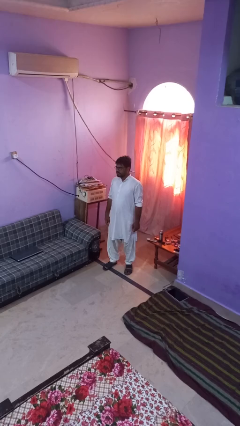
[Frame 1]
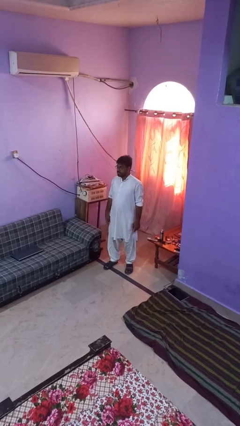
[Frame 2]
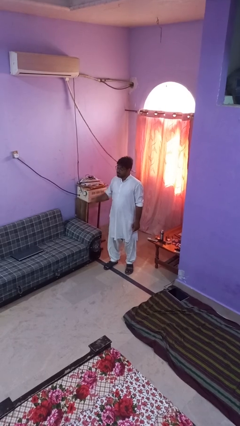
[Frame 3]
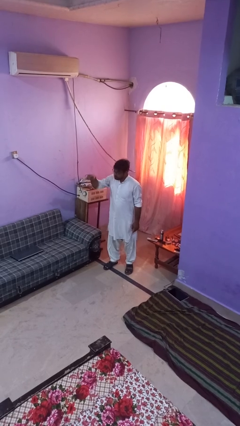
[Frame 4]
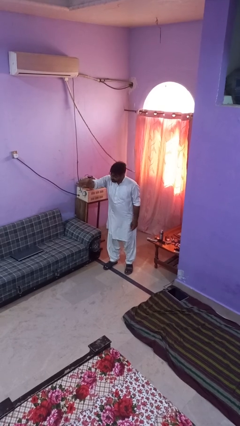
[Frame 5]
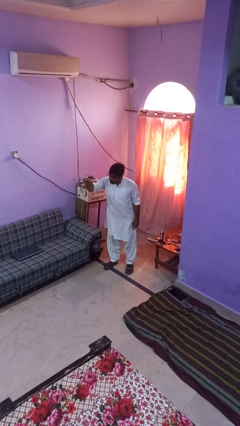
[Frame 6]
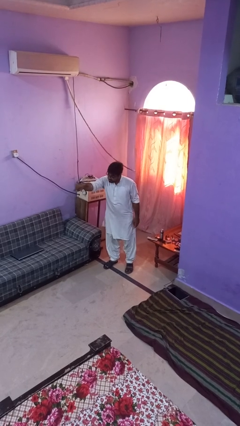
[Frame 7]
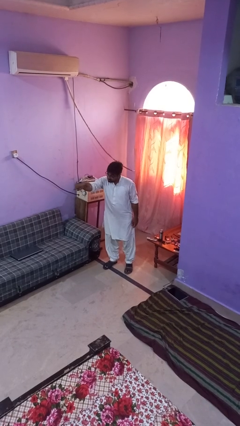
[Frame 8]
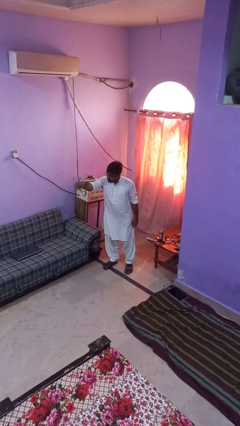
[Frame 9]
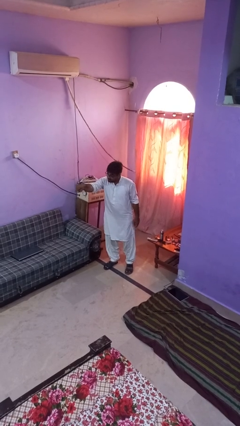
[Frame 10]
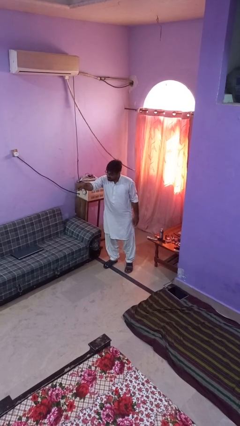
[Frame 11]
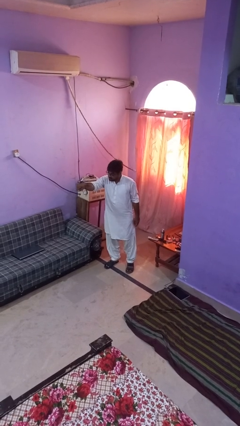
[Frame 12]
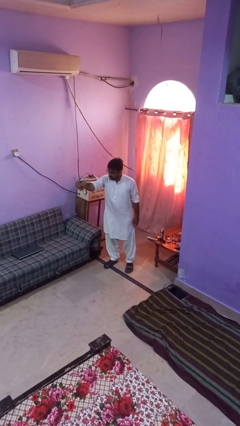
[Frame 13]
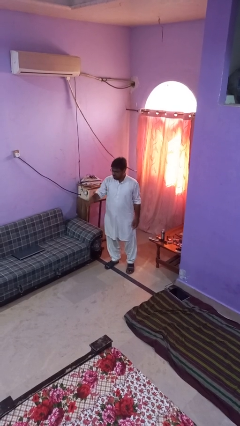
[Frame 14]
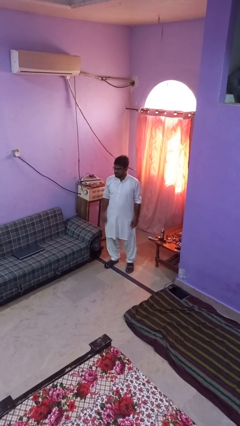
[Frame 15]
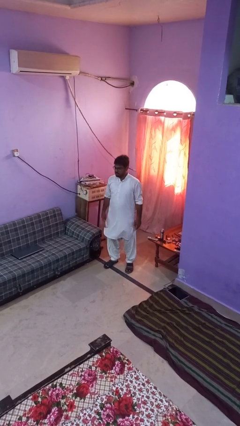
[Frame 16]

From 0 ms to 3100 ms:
person points at person

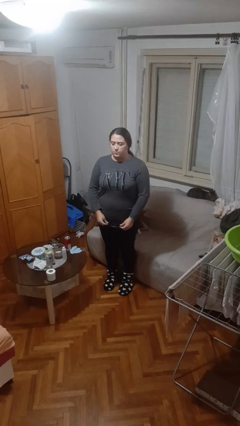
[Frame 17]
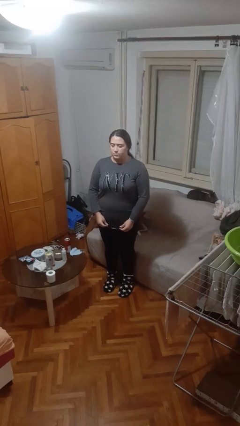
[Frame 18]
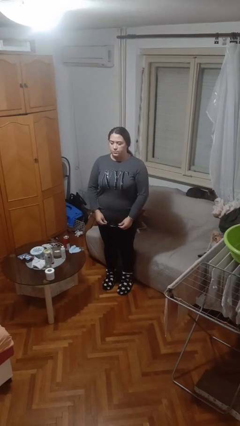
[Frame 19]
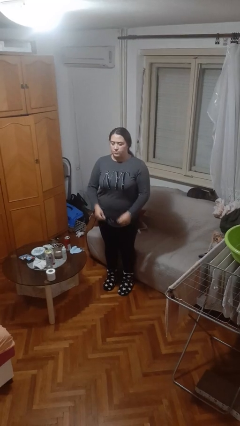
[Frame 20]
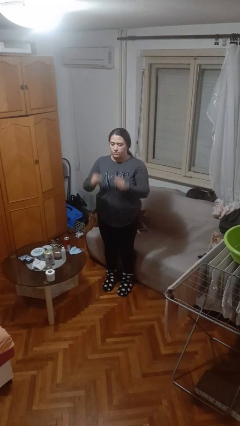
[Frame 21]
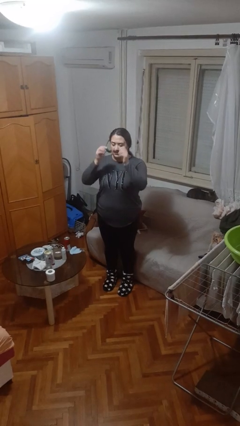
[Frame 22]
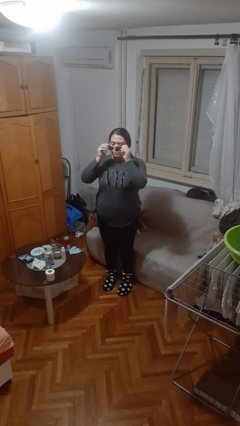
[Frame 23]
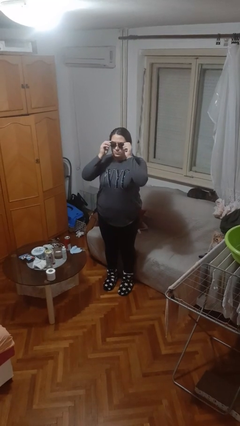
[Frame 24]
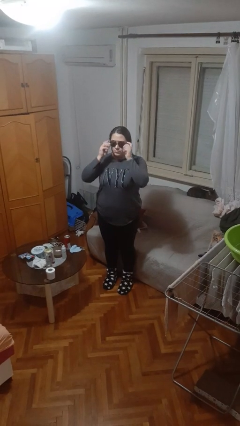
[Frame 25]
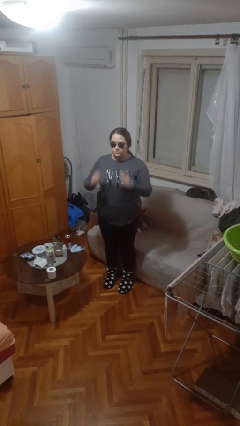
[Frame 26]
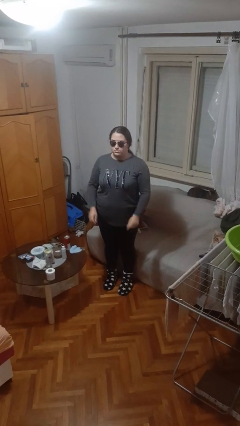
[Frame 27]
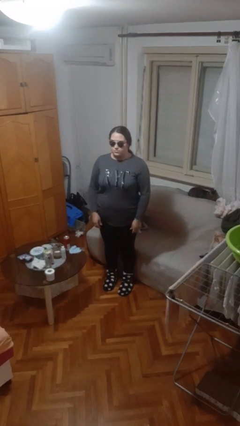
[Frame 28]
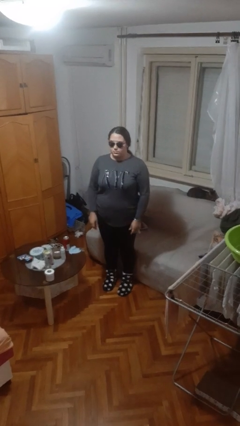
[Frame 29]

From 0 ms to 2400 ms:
person puts on sunglasses

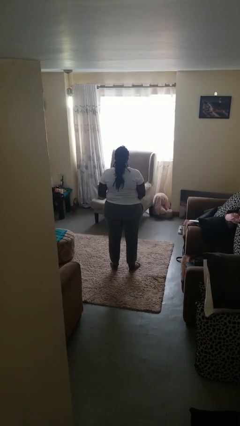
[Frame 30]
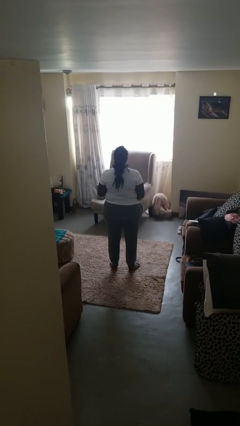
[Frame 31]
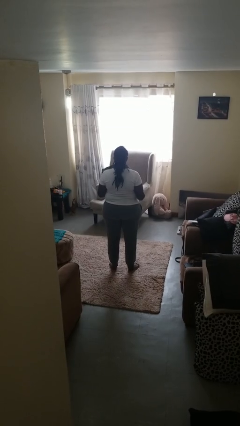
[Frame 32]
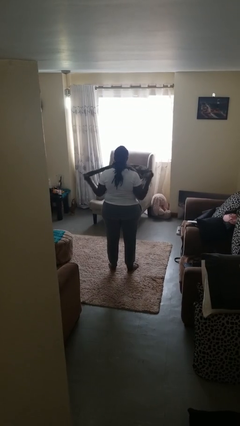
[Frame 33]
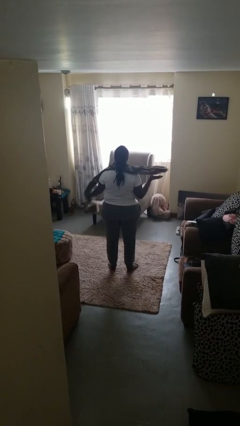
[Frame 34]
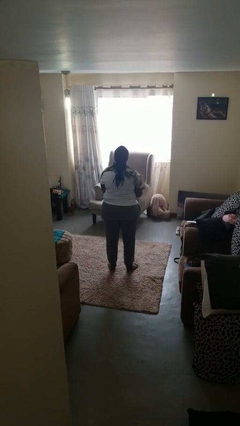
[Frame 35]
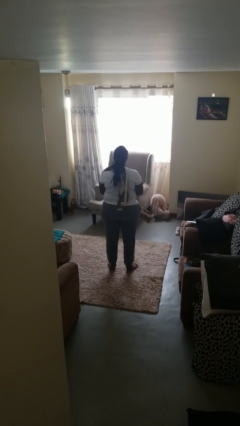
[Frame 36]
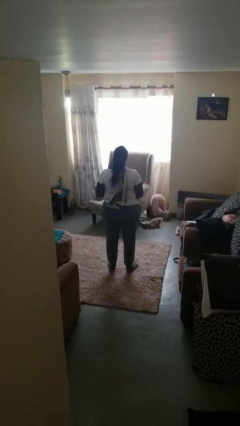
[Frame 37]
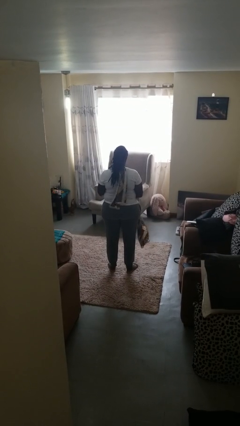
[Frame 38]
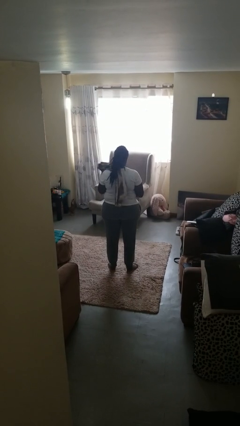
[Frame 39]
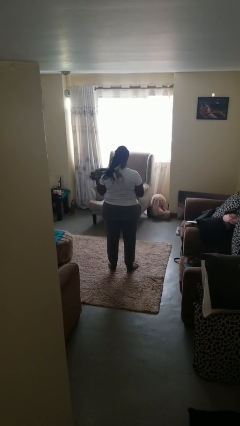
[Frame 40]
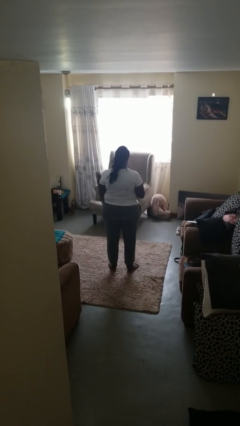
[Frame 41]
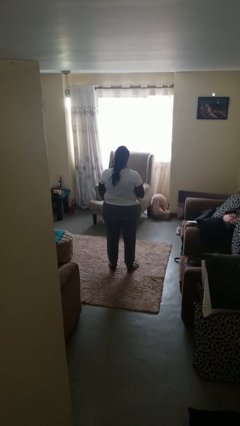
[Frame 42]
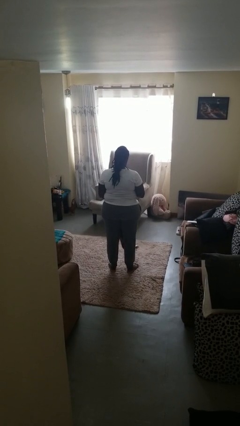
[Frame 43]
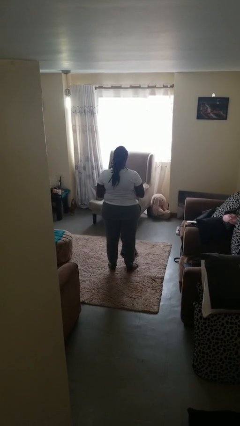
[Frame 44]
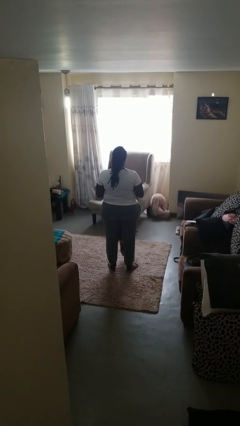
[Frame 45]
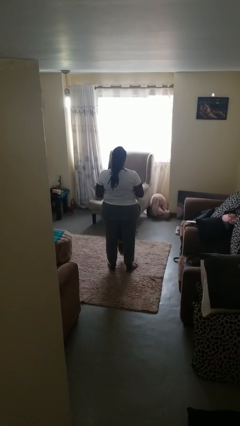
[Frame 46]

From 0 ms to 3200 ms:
person takes off scarf

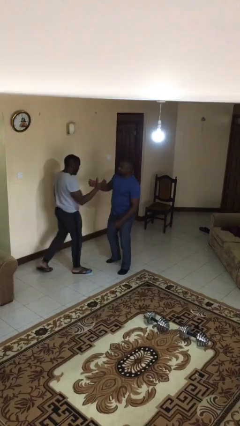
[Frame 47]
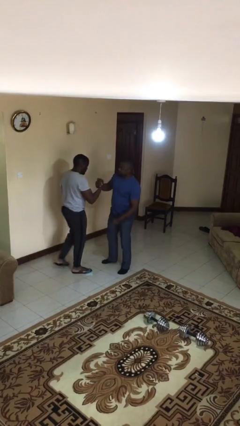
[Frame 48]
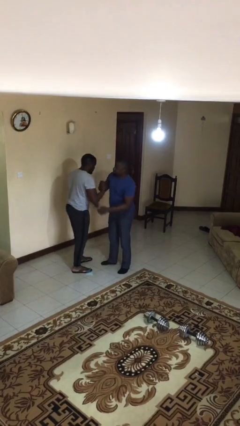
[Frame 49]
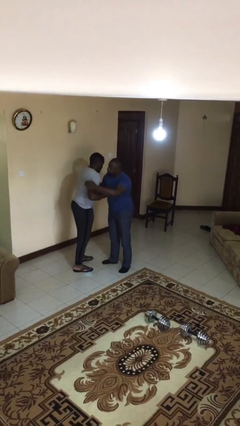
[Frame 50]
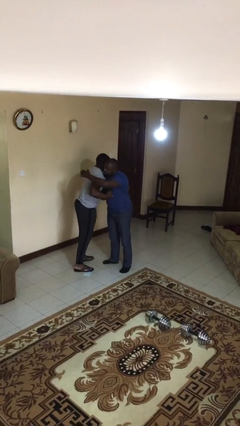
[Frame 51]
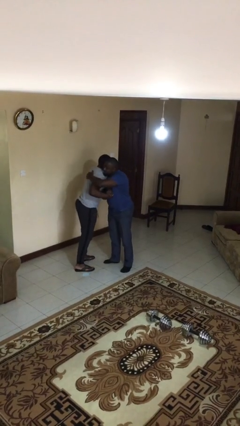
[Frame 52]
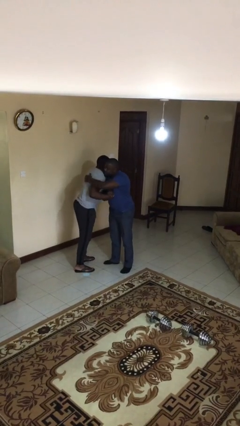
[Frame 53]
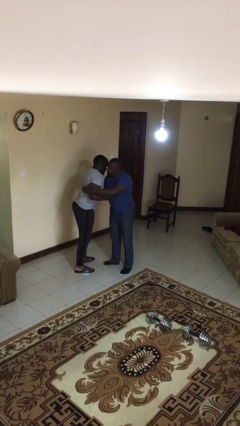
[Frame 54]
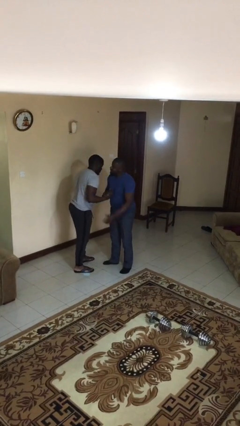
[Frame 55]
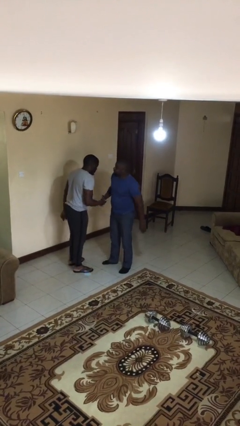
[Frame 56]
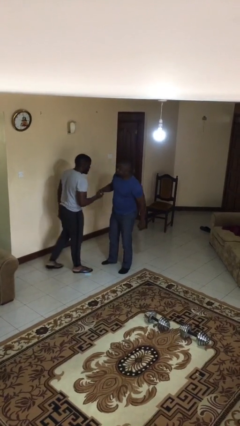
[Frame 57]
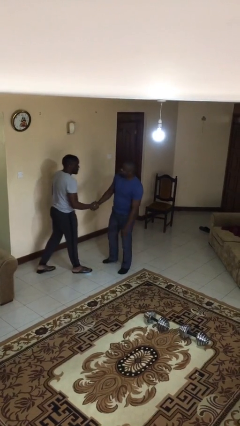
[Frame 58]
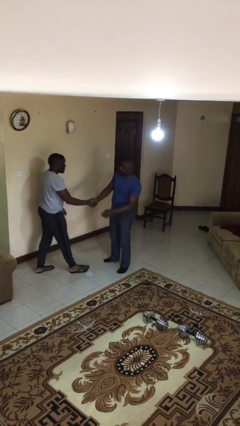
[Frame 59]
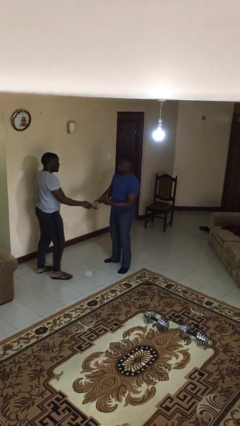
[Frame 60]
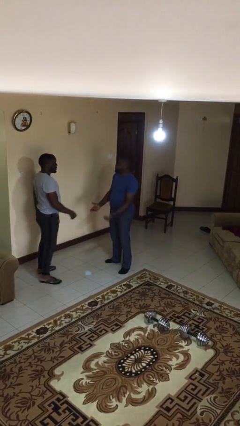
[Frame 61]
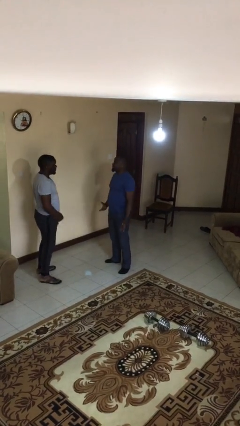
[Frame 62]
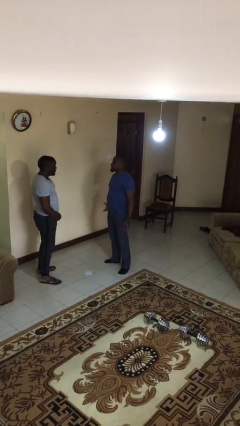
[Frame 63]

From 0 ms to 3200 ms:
person embraces person

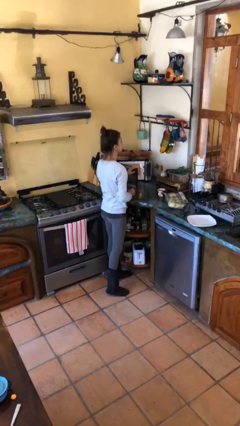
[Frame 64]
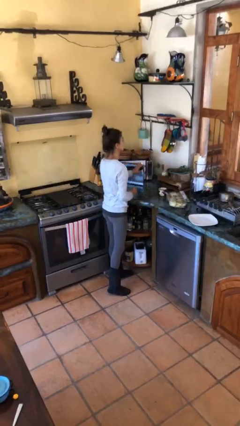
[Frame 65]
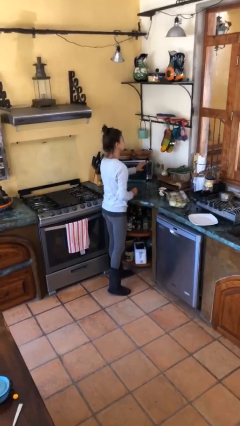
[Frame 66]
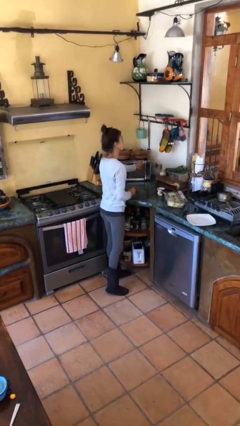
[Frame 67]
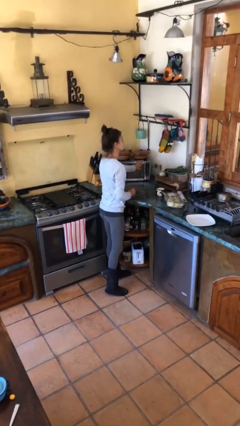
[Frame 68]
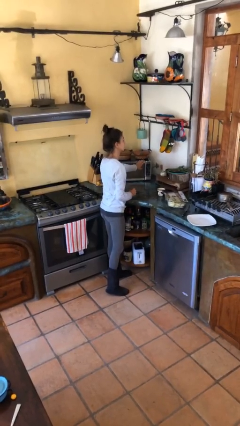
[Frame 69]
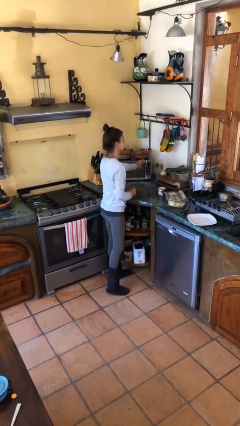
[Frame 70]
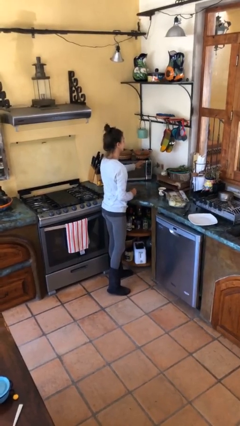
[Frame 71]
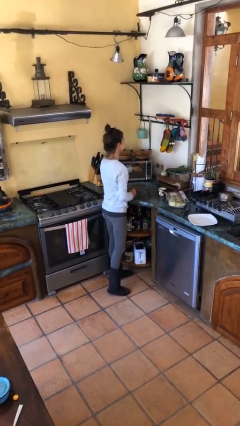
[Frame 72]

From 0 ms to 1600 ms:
person closes microwave

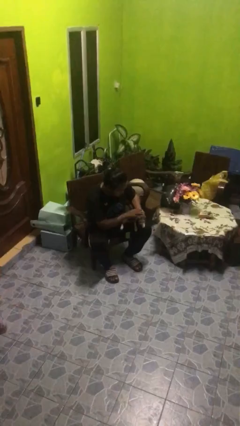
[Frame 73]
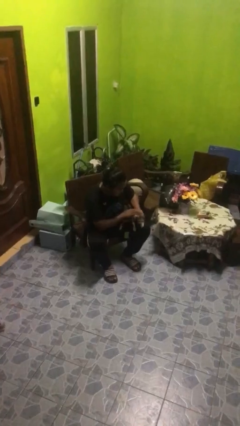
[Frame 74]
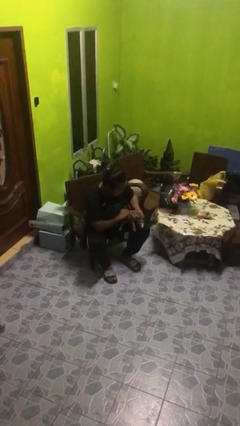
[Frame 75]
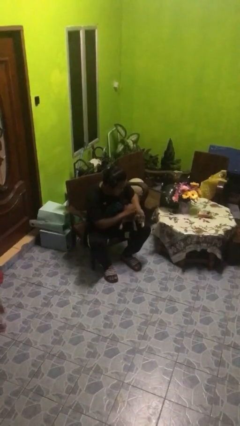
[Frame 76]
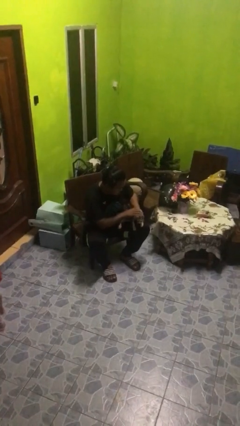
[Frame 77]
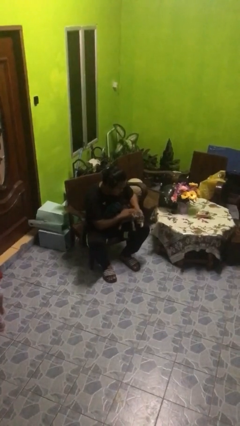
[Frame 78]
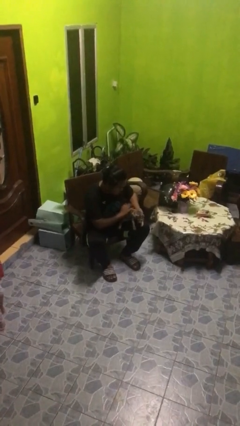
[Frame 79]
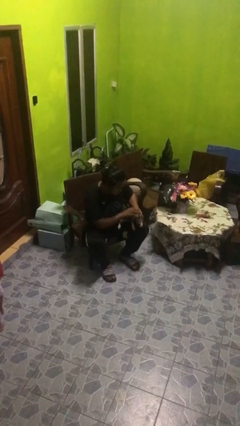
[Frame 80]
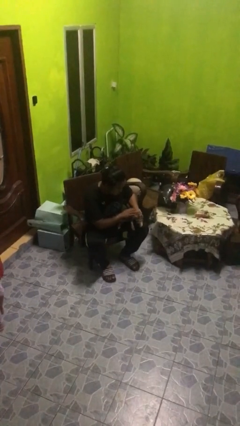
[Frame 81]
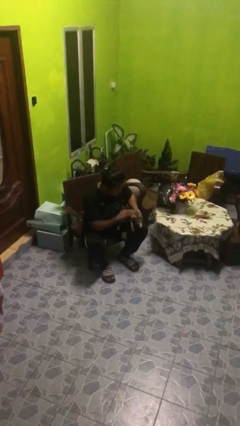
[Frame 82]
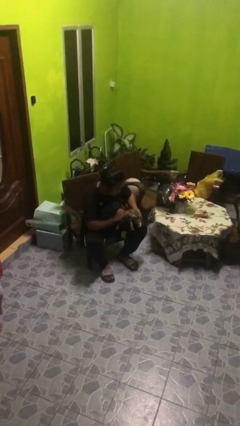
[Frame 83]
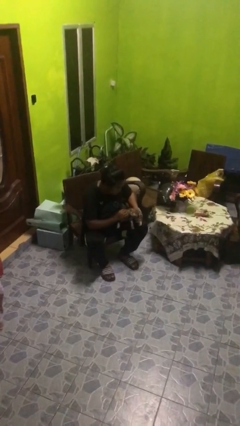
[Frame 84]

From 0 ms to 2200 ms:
person pets cat

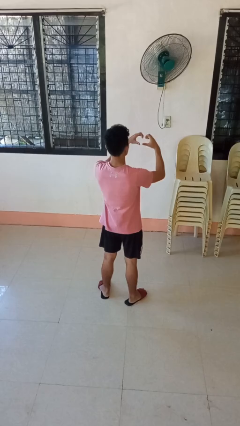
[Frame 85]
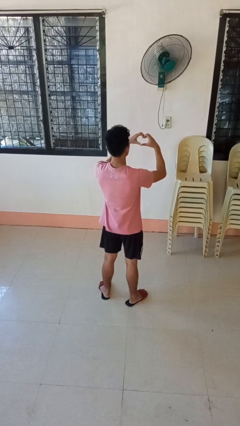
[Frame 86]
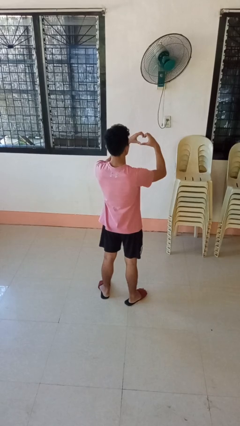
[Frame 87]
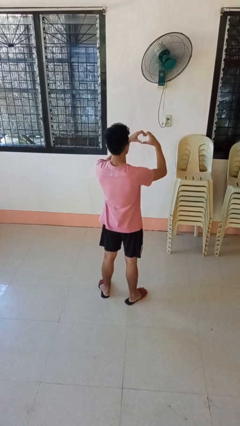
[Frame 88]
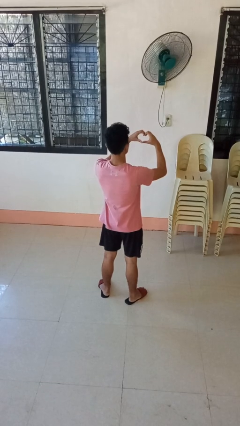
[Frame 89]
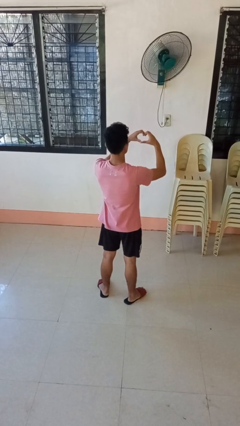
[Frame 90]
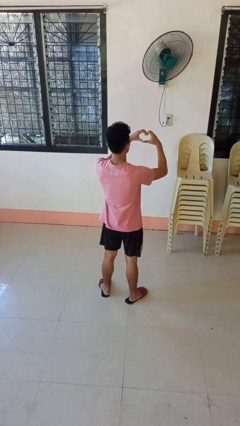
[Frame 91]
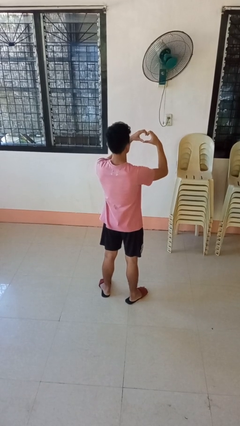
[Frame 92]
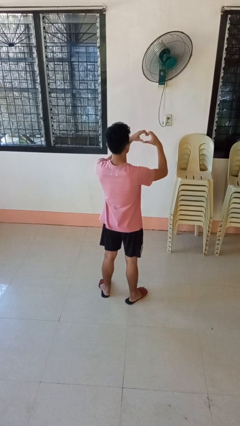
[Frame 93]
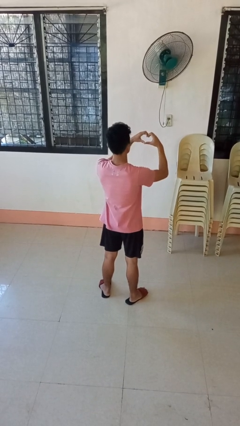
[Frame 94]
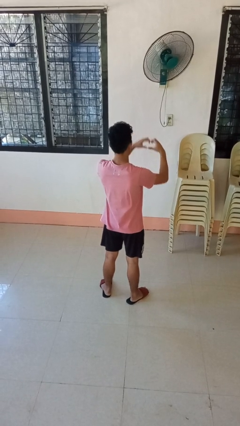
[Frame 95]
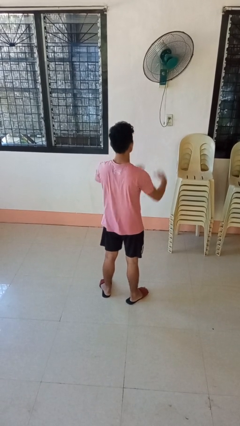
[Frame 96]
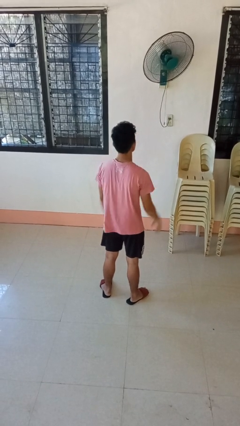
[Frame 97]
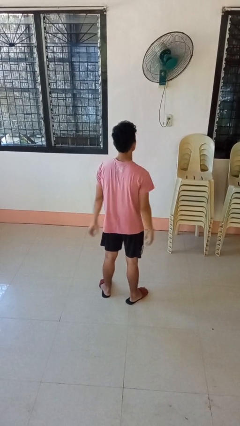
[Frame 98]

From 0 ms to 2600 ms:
person gestures heart
